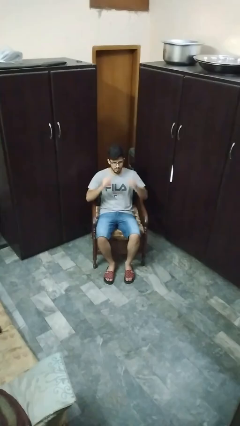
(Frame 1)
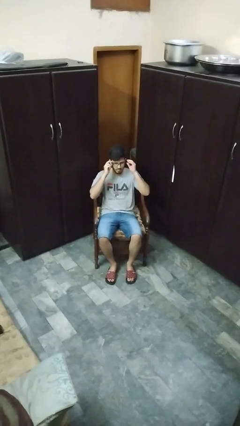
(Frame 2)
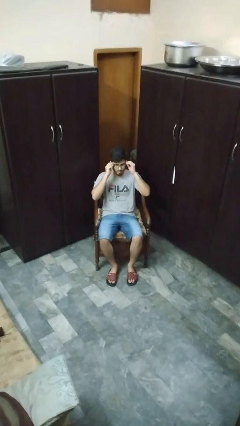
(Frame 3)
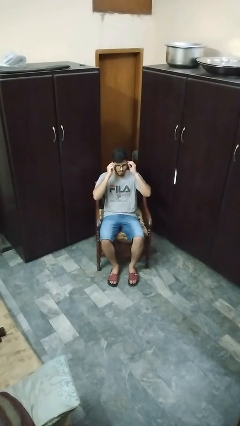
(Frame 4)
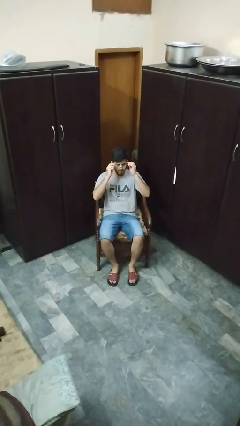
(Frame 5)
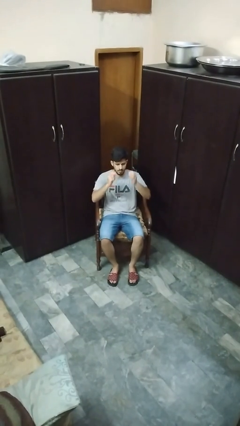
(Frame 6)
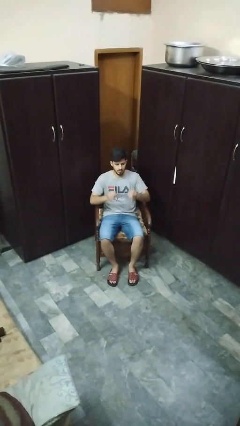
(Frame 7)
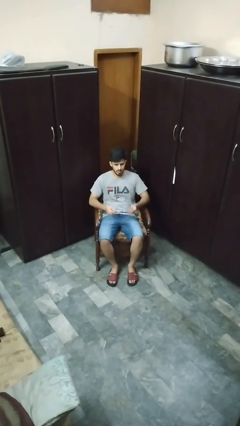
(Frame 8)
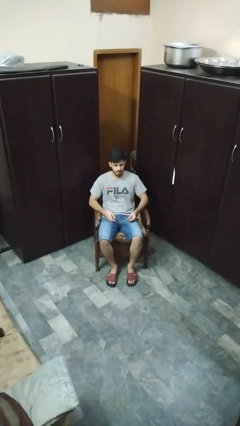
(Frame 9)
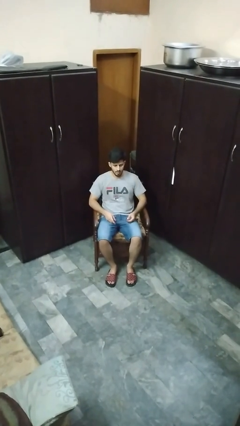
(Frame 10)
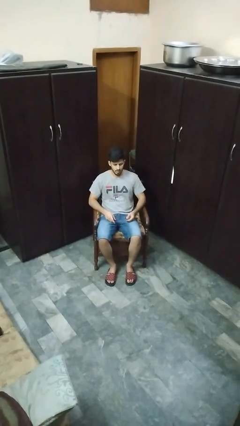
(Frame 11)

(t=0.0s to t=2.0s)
person takes off glasses

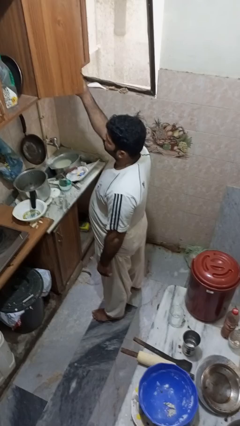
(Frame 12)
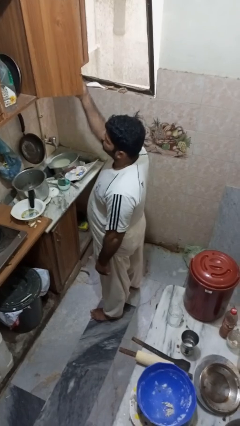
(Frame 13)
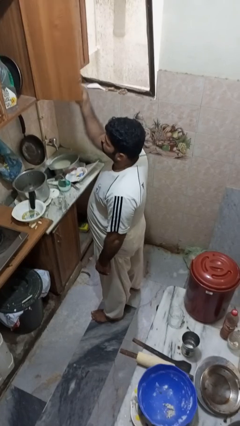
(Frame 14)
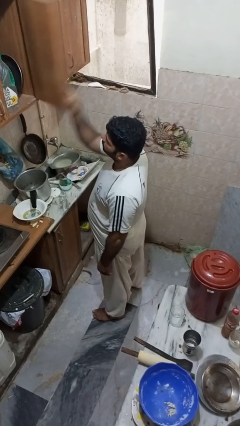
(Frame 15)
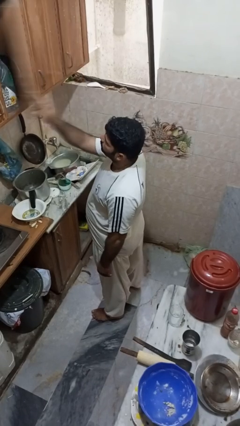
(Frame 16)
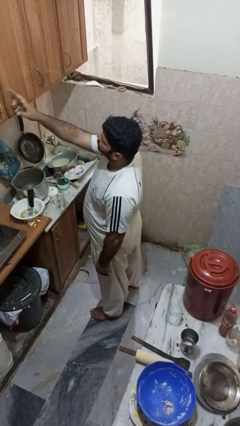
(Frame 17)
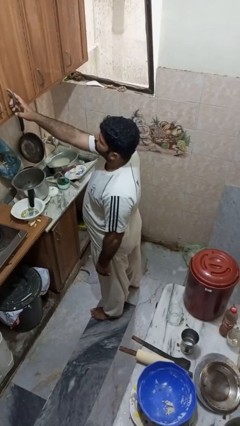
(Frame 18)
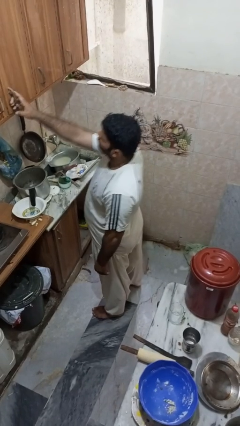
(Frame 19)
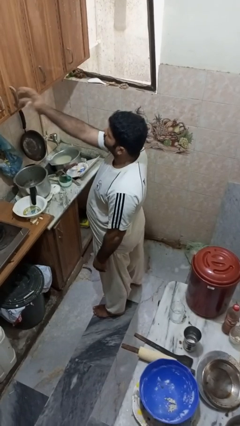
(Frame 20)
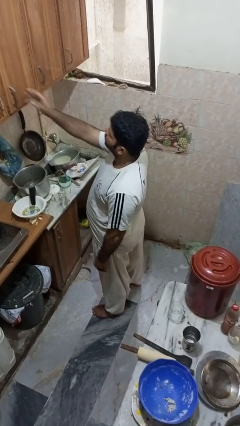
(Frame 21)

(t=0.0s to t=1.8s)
person closes cabinet

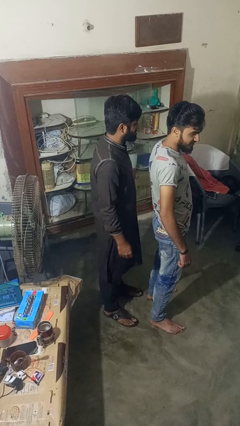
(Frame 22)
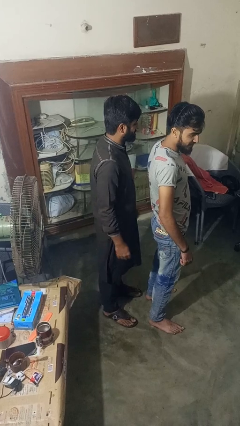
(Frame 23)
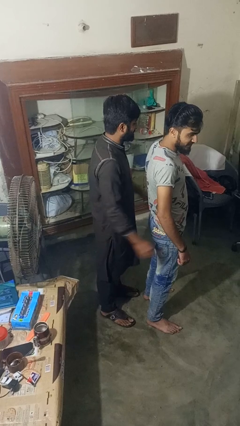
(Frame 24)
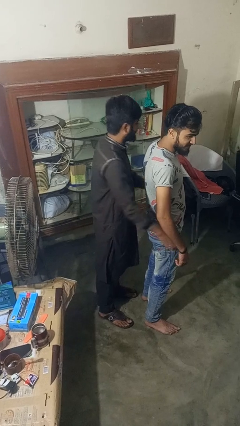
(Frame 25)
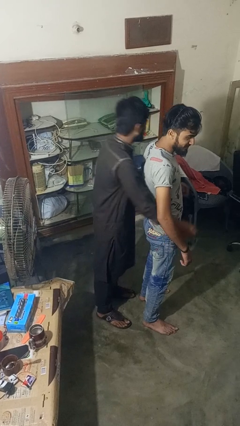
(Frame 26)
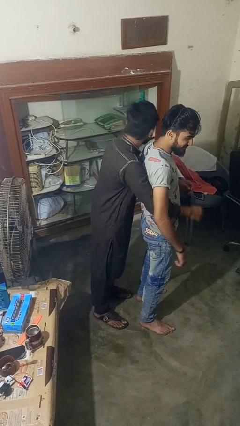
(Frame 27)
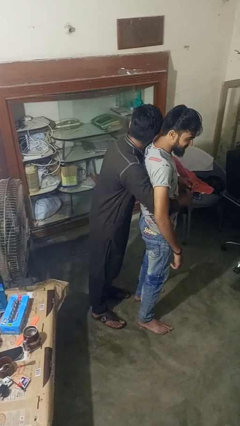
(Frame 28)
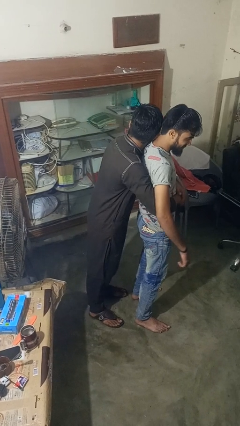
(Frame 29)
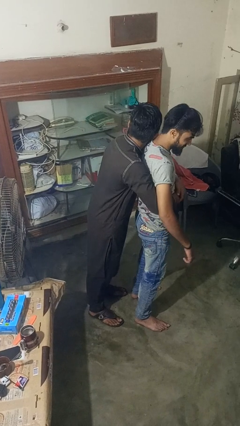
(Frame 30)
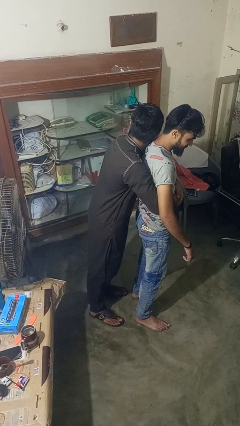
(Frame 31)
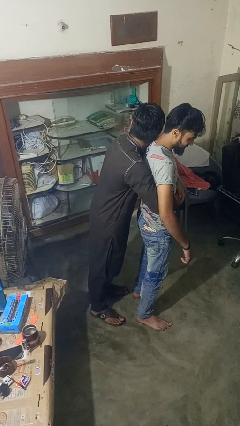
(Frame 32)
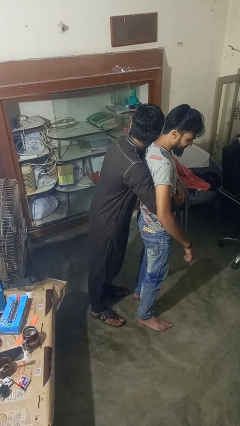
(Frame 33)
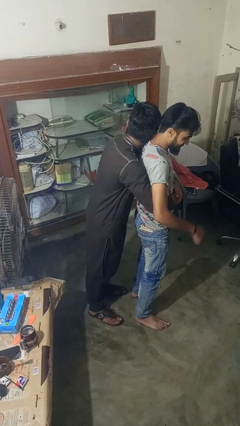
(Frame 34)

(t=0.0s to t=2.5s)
person hugs person from behind

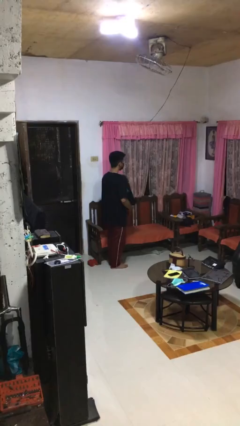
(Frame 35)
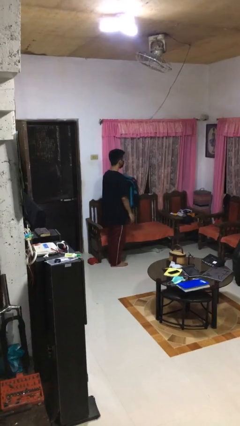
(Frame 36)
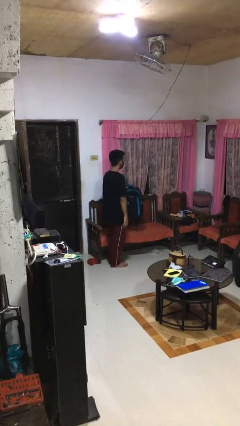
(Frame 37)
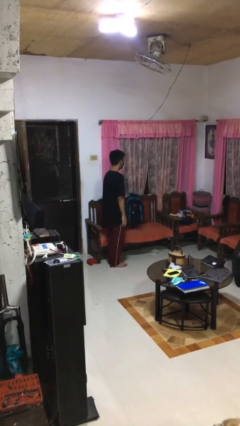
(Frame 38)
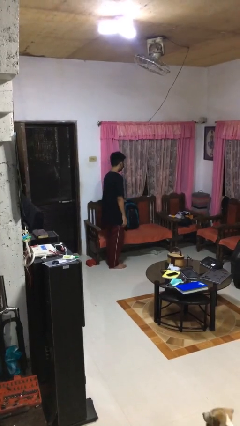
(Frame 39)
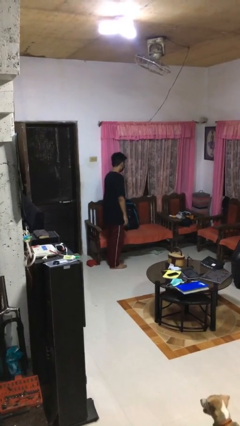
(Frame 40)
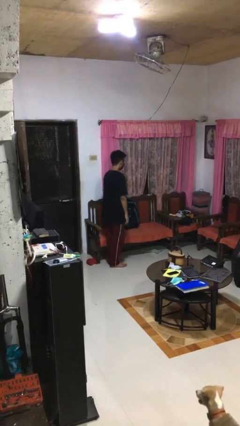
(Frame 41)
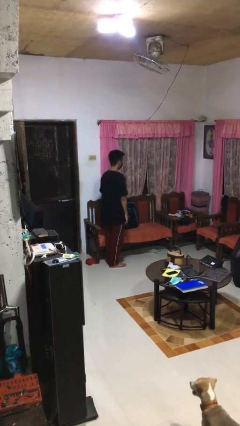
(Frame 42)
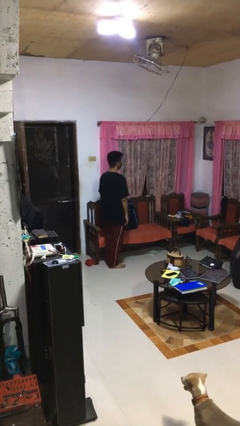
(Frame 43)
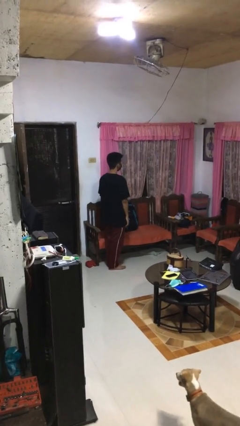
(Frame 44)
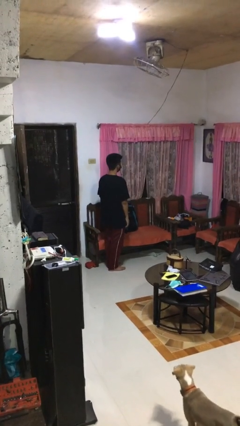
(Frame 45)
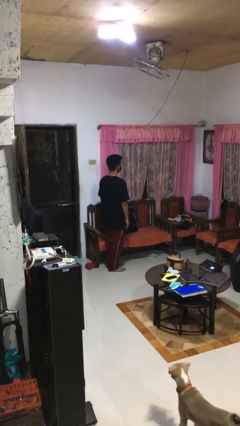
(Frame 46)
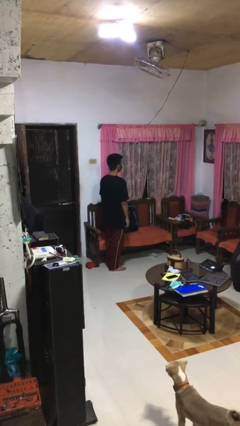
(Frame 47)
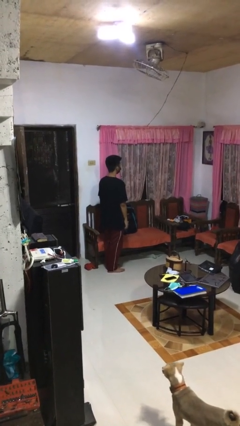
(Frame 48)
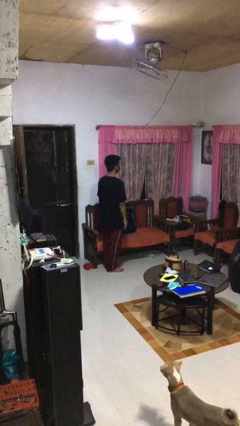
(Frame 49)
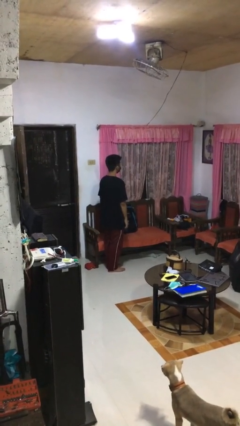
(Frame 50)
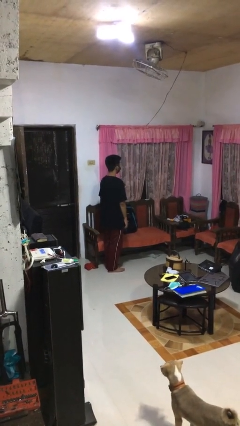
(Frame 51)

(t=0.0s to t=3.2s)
person puts down object on couch

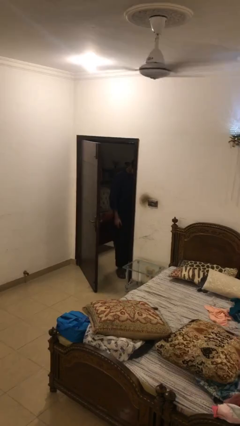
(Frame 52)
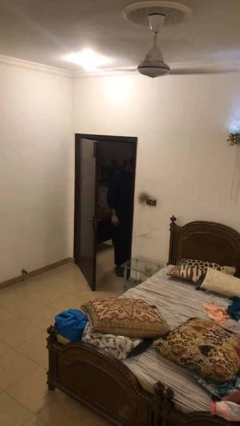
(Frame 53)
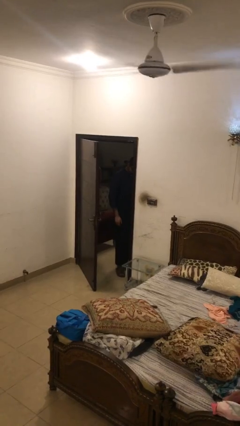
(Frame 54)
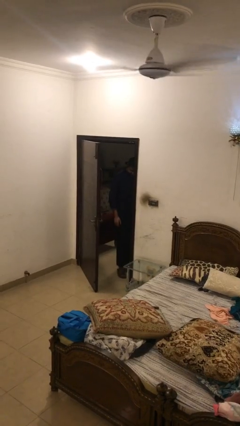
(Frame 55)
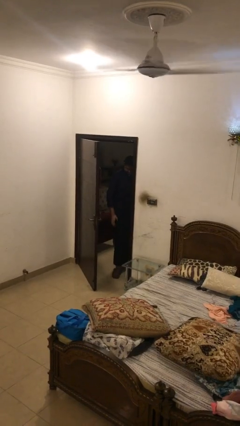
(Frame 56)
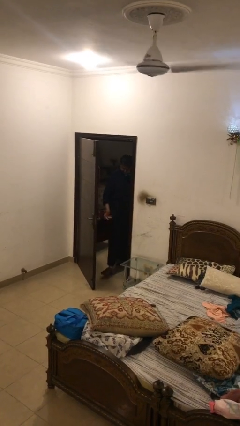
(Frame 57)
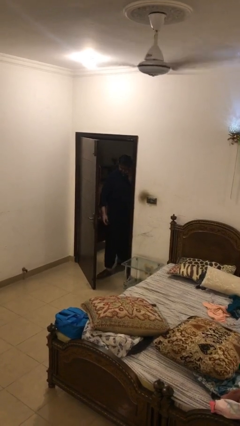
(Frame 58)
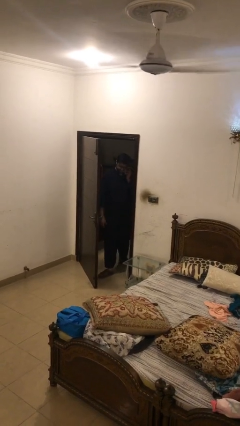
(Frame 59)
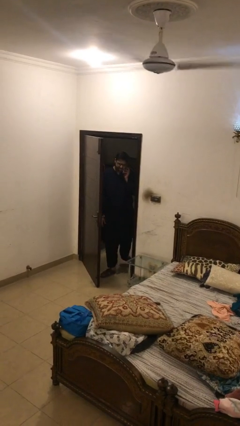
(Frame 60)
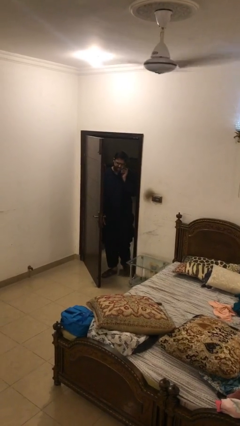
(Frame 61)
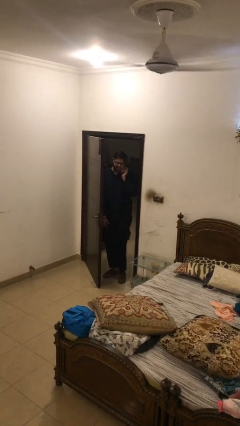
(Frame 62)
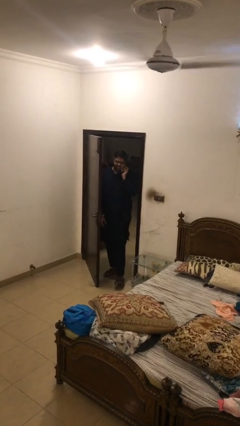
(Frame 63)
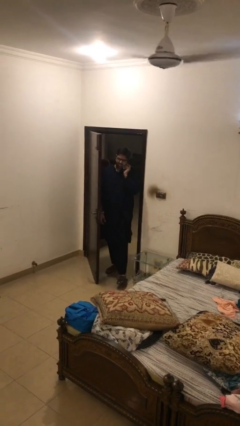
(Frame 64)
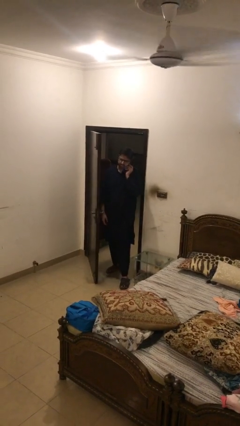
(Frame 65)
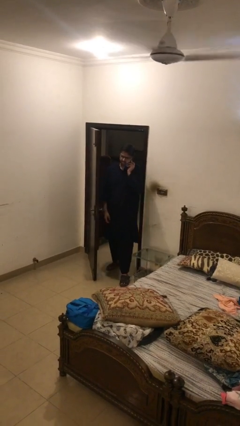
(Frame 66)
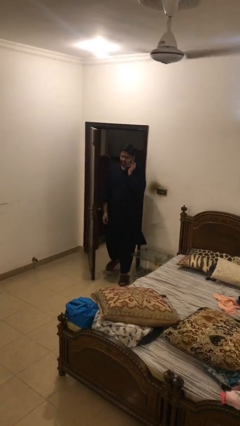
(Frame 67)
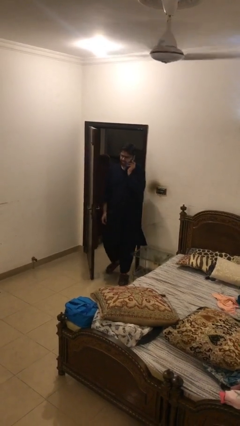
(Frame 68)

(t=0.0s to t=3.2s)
person enters scene through structure

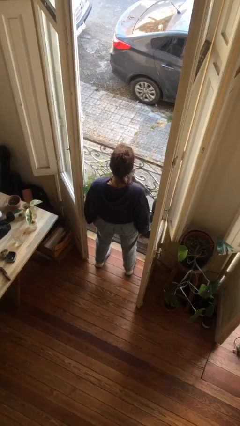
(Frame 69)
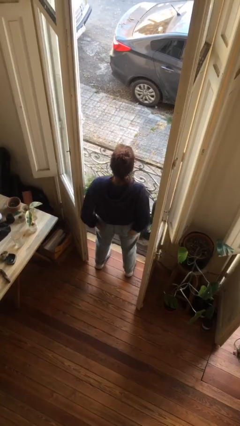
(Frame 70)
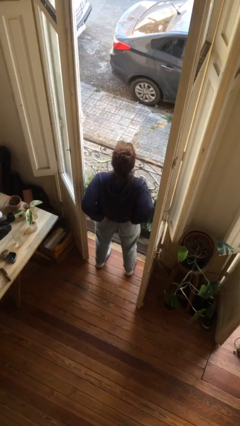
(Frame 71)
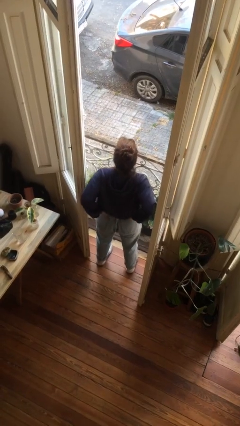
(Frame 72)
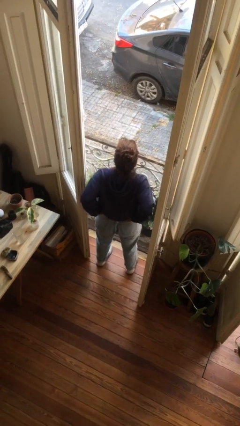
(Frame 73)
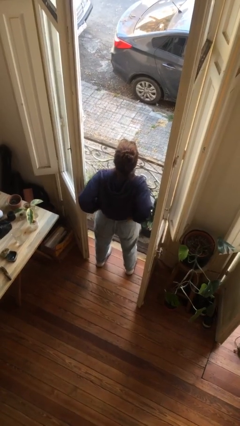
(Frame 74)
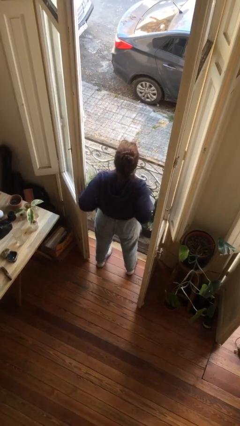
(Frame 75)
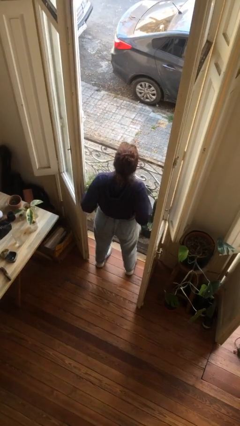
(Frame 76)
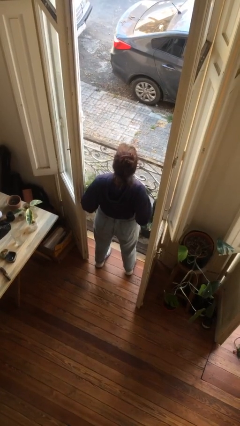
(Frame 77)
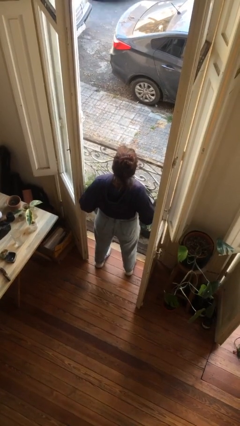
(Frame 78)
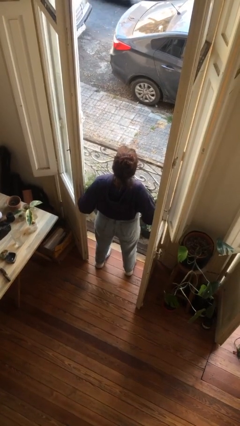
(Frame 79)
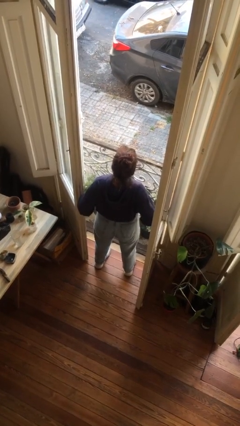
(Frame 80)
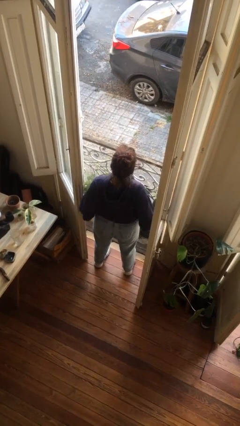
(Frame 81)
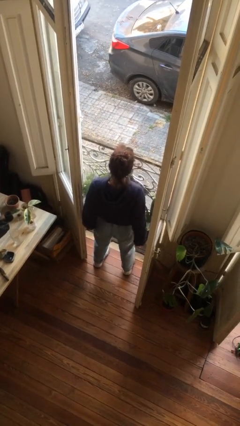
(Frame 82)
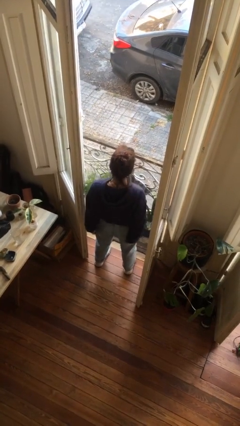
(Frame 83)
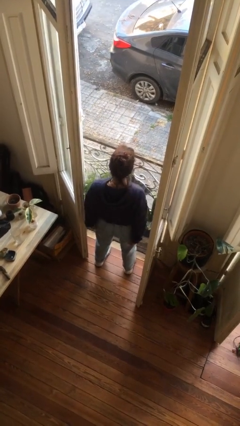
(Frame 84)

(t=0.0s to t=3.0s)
person hikes up pants

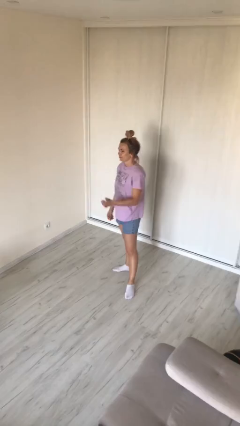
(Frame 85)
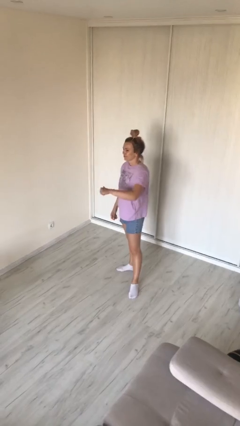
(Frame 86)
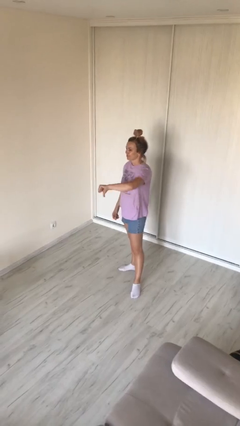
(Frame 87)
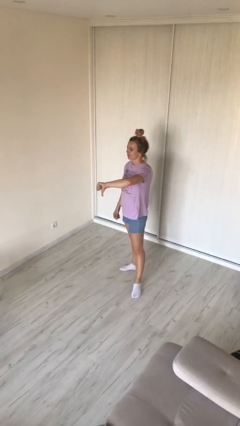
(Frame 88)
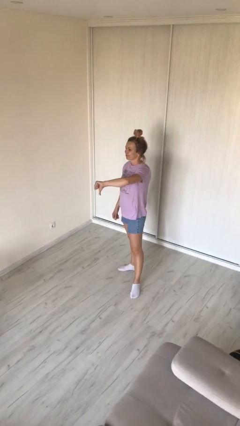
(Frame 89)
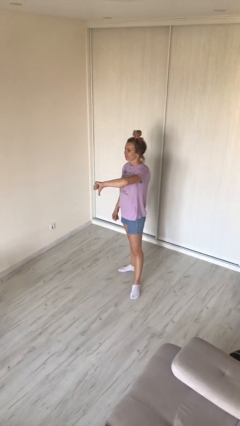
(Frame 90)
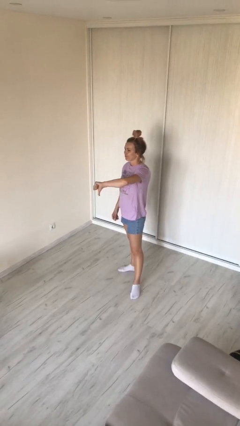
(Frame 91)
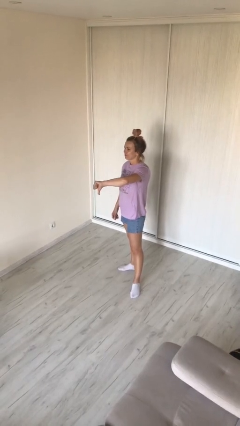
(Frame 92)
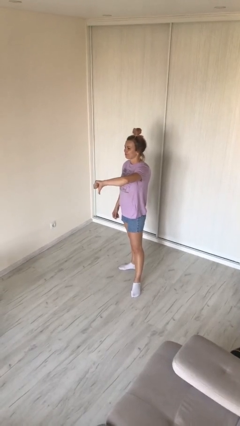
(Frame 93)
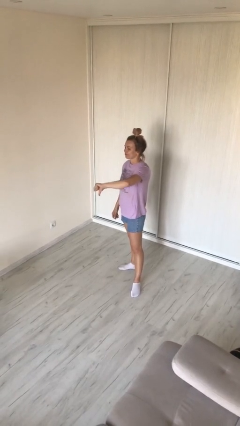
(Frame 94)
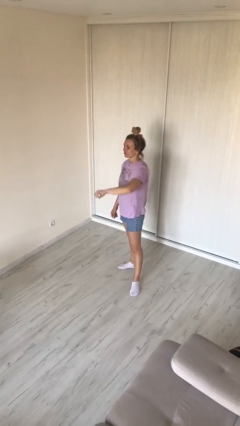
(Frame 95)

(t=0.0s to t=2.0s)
person gestures thumbs down
